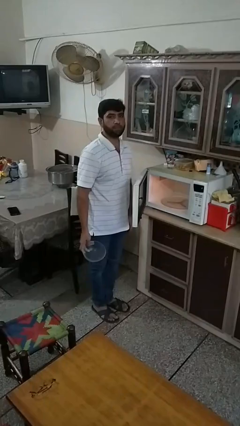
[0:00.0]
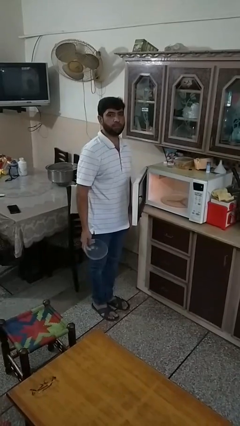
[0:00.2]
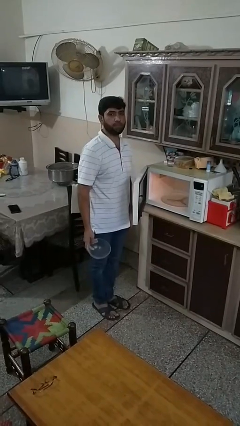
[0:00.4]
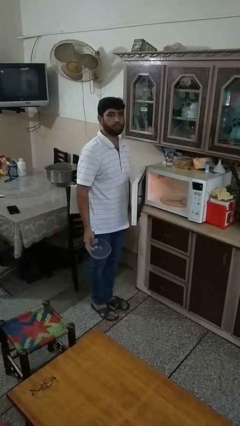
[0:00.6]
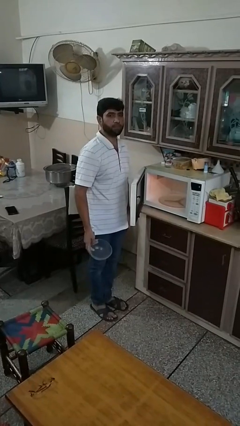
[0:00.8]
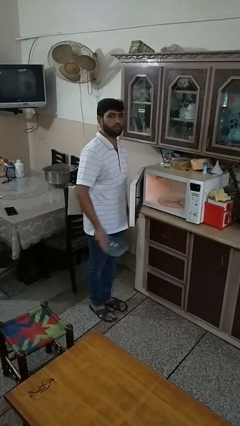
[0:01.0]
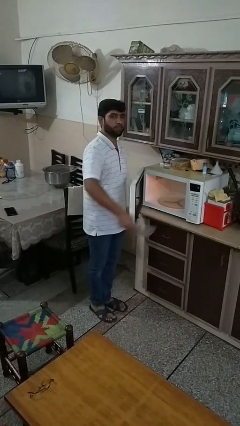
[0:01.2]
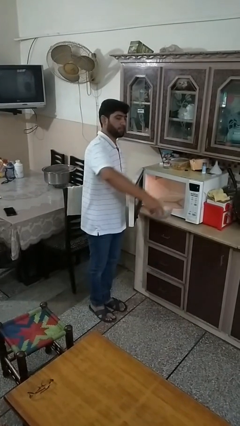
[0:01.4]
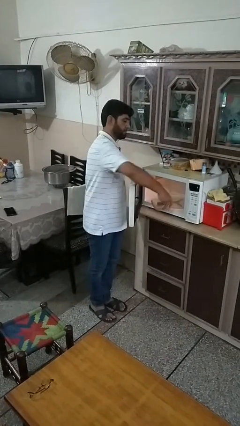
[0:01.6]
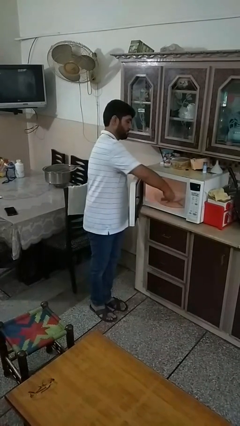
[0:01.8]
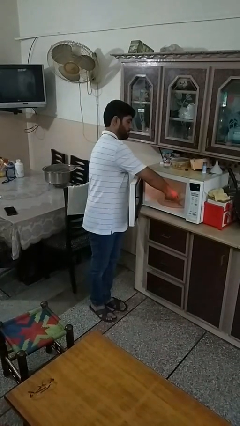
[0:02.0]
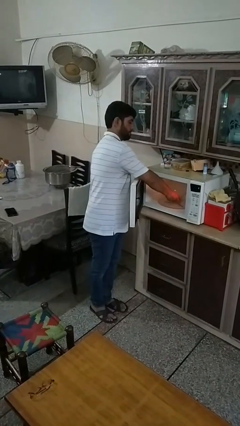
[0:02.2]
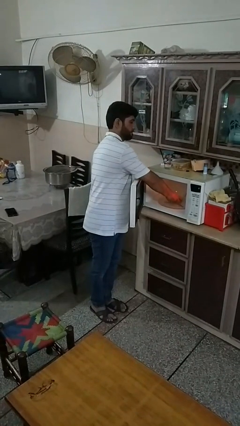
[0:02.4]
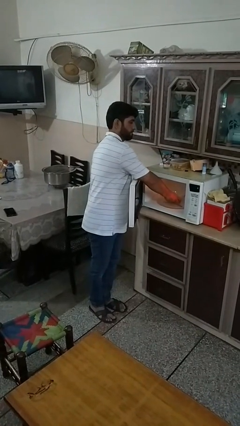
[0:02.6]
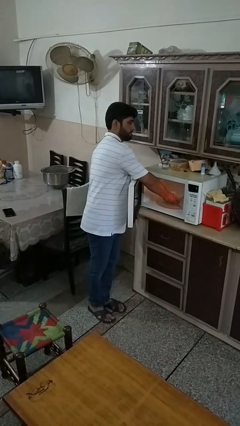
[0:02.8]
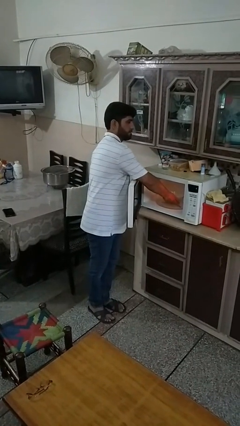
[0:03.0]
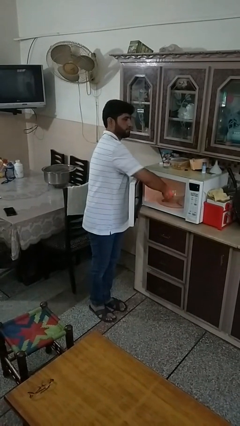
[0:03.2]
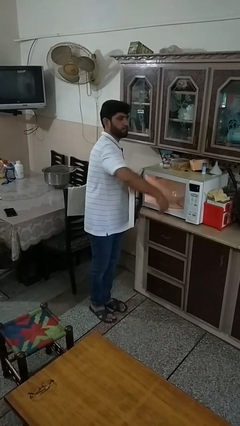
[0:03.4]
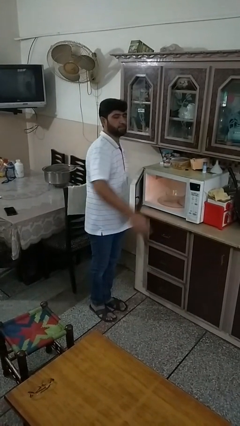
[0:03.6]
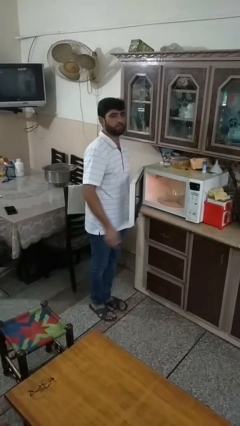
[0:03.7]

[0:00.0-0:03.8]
person puts object into microwave

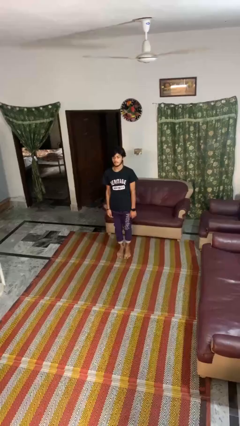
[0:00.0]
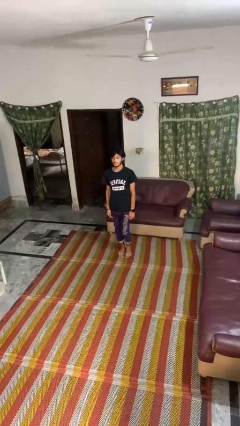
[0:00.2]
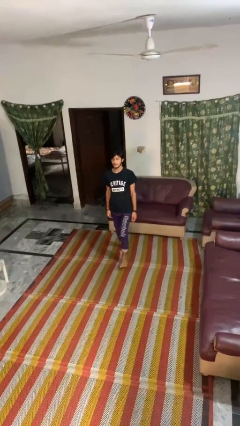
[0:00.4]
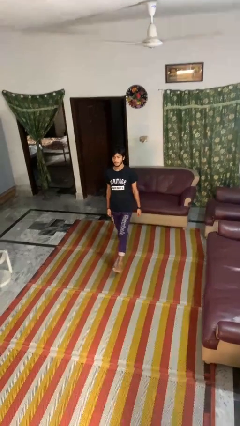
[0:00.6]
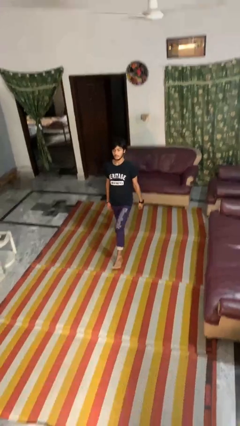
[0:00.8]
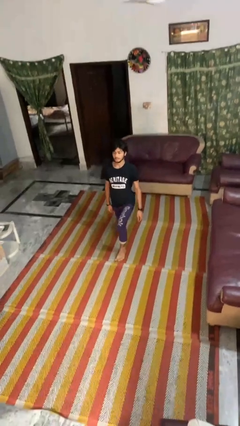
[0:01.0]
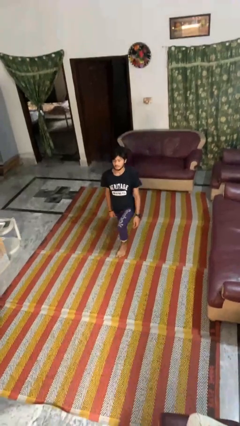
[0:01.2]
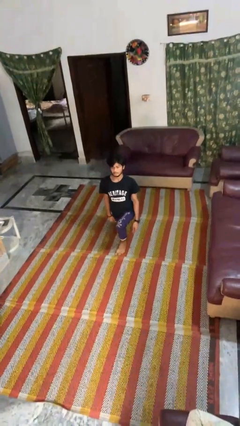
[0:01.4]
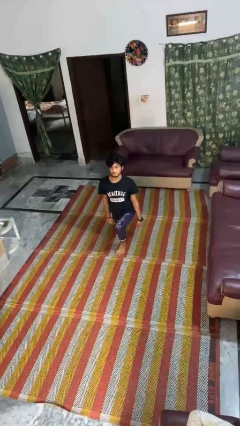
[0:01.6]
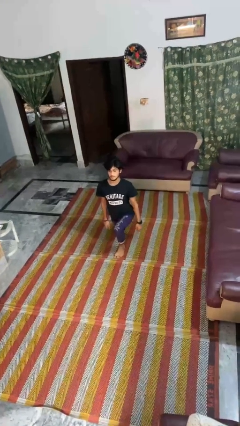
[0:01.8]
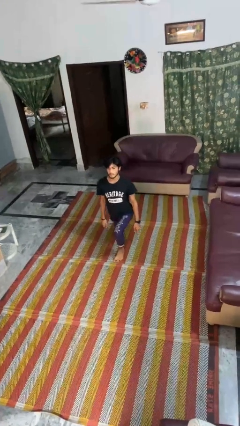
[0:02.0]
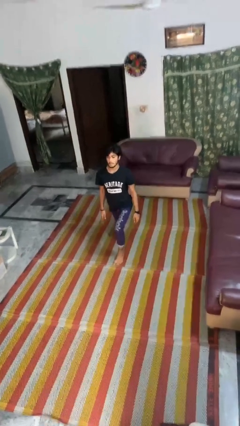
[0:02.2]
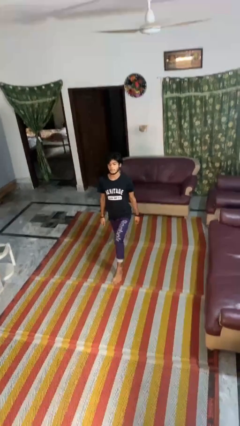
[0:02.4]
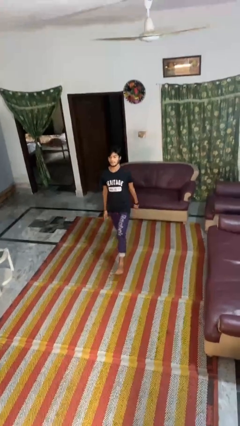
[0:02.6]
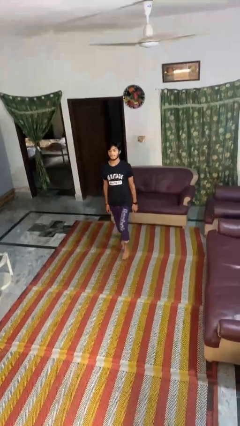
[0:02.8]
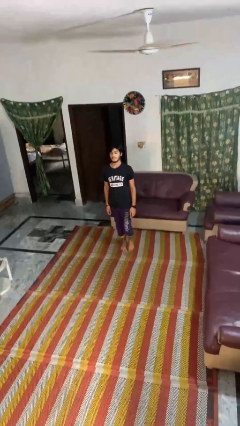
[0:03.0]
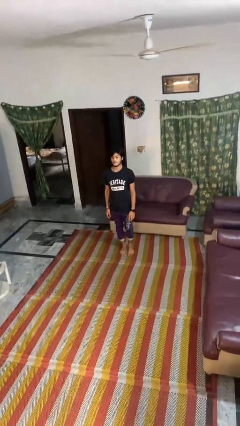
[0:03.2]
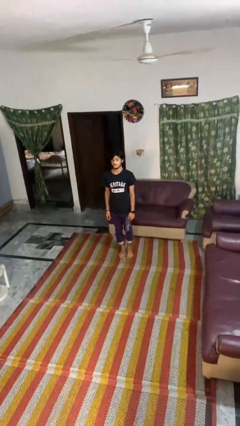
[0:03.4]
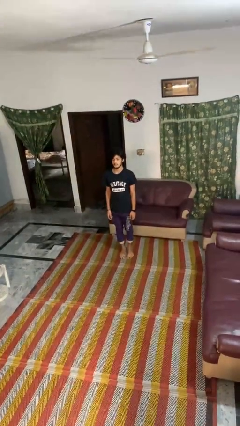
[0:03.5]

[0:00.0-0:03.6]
person exercises with lunges

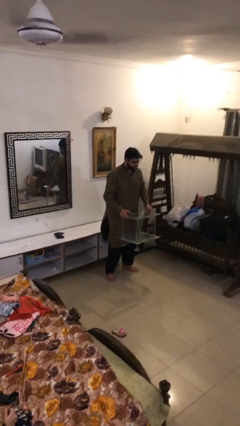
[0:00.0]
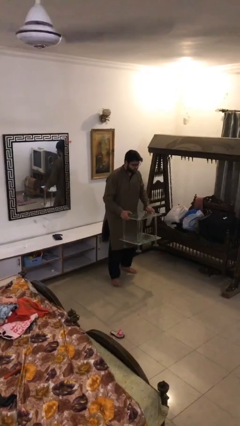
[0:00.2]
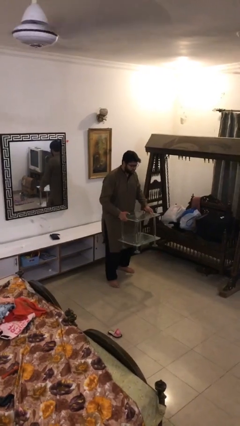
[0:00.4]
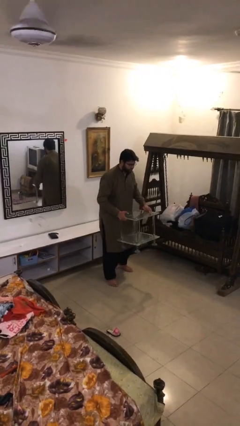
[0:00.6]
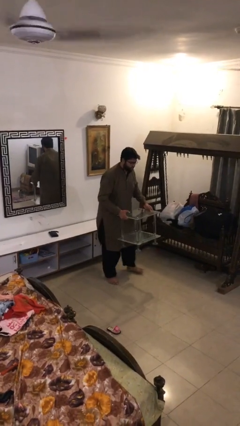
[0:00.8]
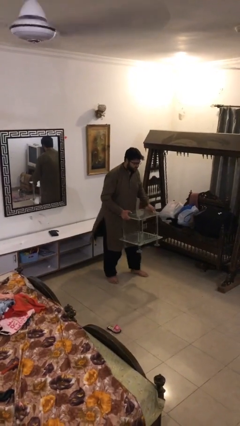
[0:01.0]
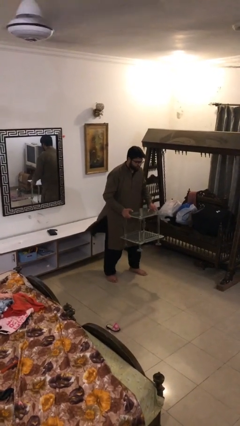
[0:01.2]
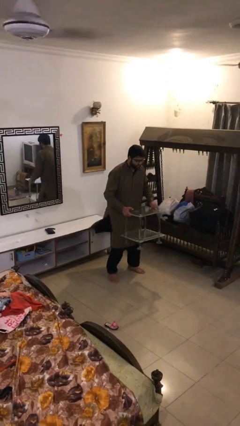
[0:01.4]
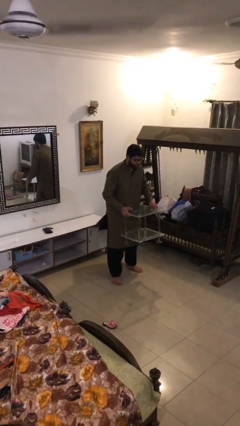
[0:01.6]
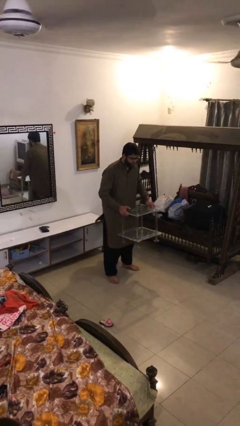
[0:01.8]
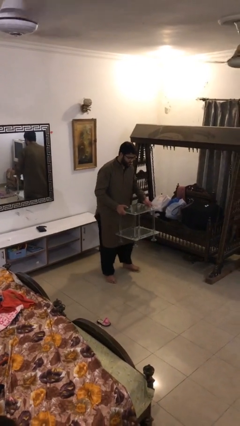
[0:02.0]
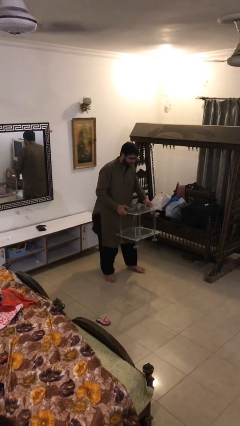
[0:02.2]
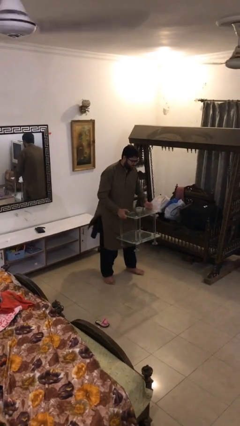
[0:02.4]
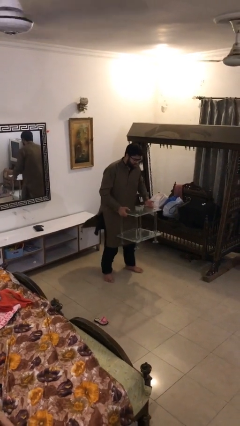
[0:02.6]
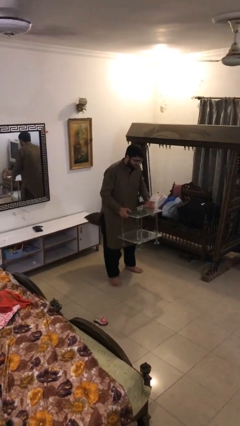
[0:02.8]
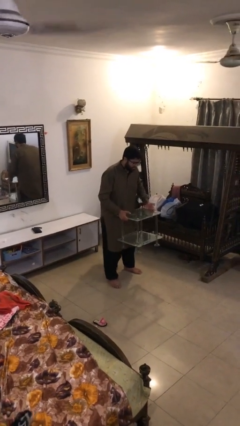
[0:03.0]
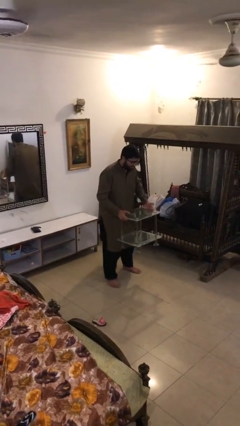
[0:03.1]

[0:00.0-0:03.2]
person carries heavy object

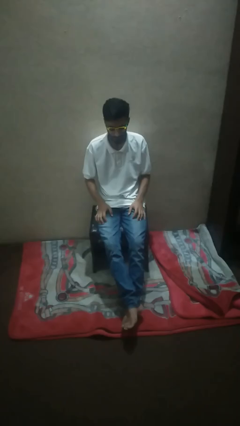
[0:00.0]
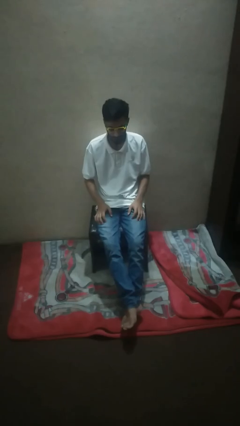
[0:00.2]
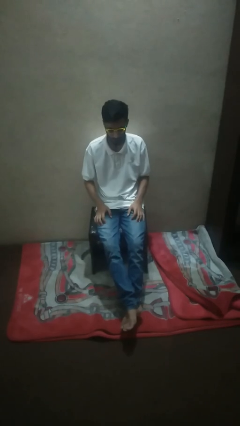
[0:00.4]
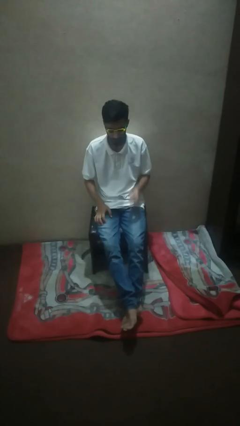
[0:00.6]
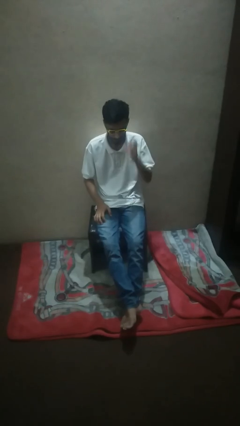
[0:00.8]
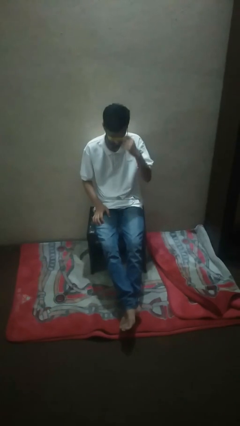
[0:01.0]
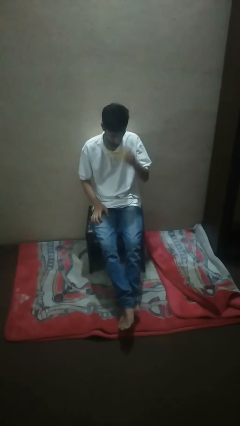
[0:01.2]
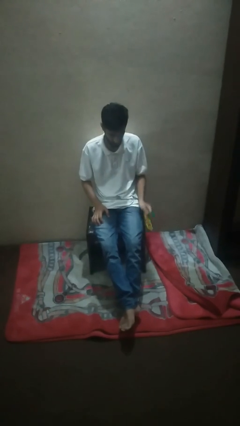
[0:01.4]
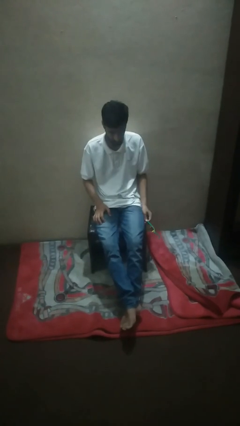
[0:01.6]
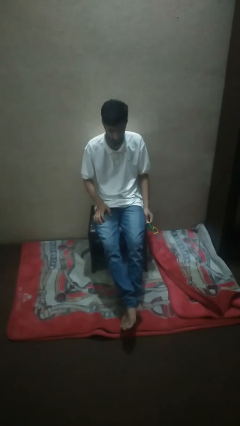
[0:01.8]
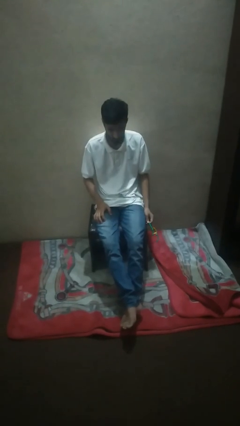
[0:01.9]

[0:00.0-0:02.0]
person takes off sunglasses

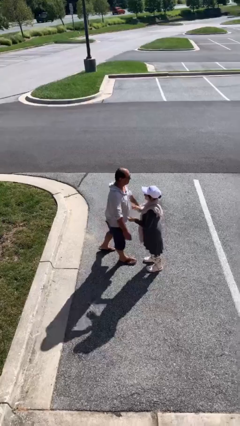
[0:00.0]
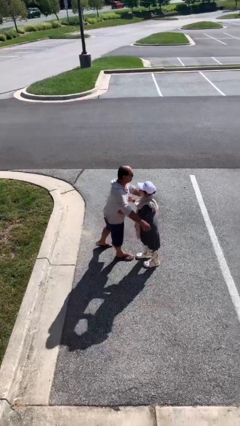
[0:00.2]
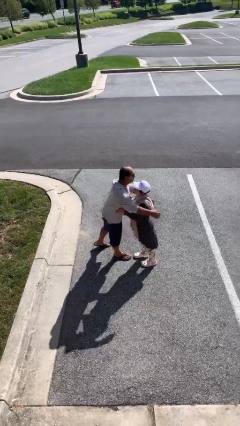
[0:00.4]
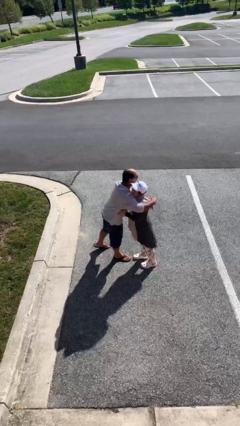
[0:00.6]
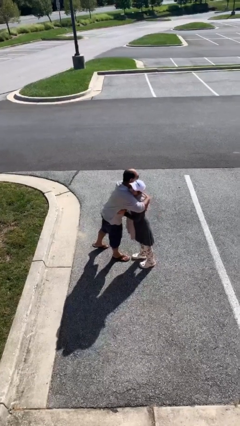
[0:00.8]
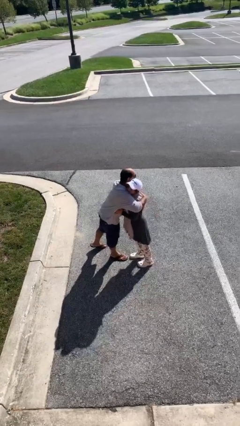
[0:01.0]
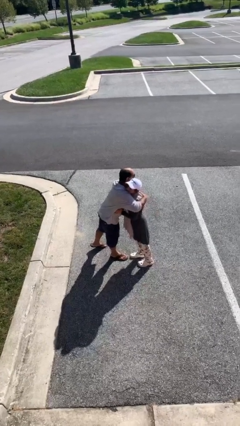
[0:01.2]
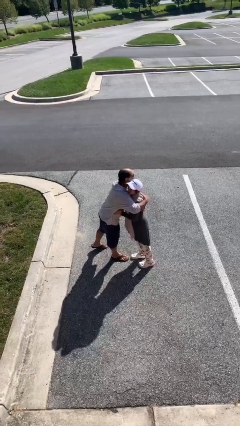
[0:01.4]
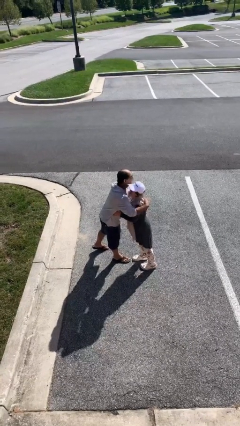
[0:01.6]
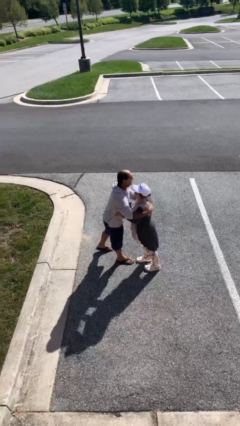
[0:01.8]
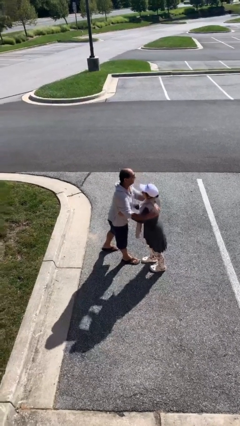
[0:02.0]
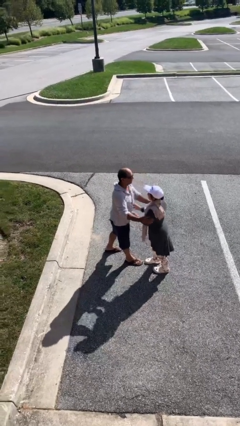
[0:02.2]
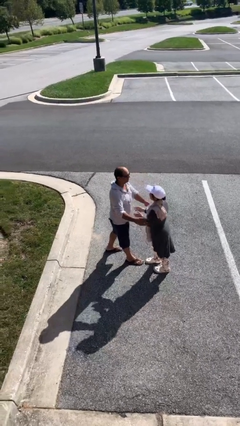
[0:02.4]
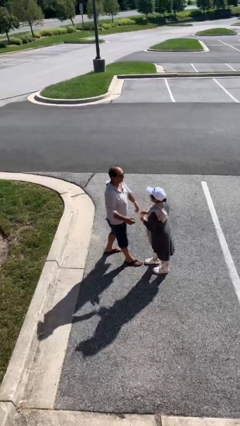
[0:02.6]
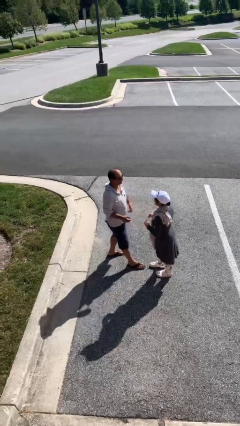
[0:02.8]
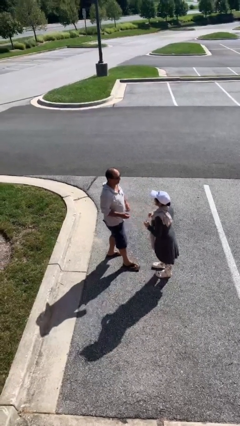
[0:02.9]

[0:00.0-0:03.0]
person embraces person

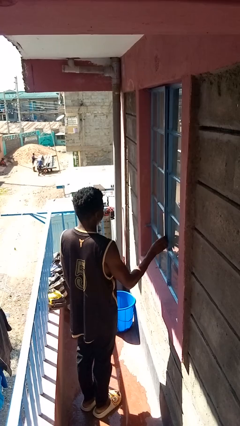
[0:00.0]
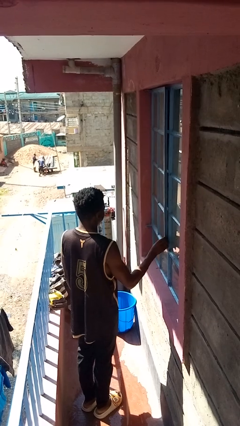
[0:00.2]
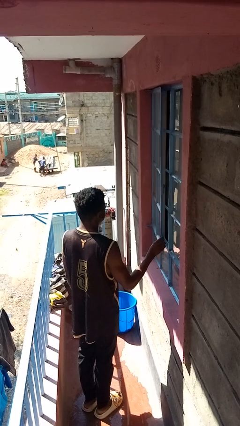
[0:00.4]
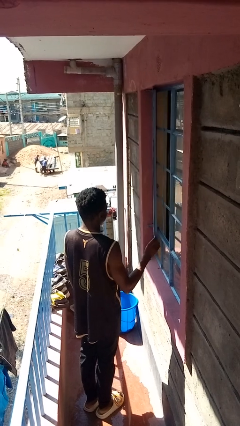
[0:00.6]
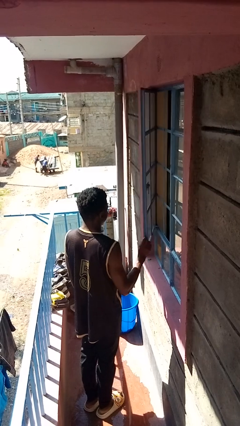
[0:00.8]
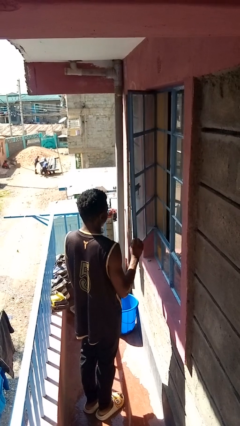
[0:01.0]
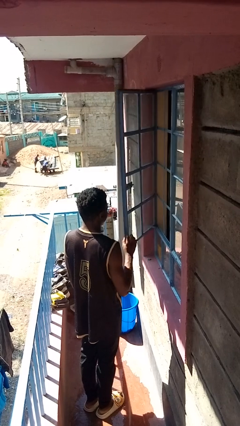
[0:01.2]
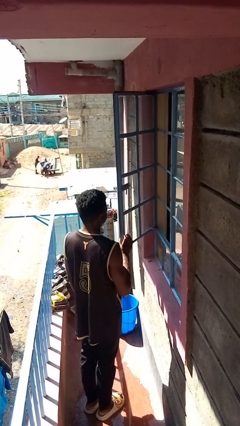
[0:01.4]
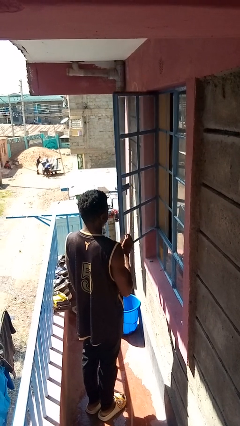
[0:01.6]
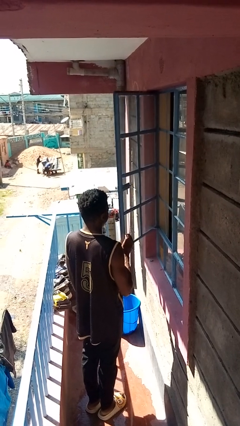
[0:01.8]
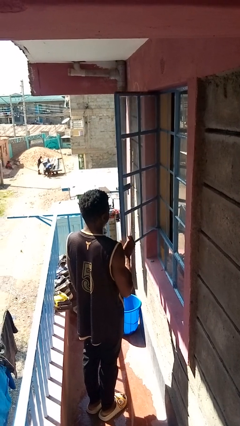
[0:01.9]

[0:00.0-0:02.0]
person opens home window
